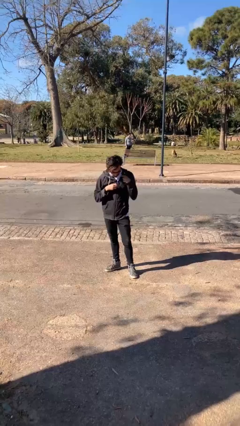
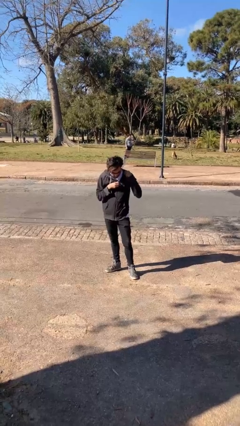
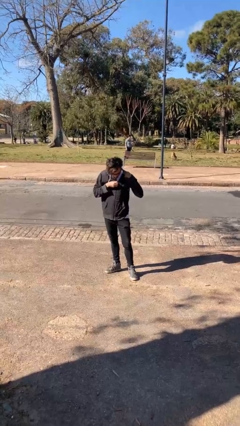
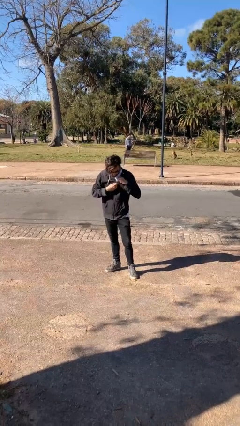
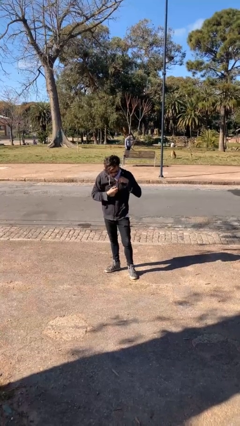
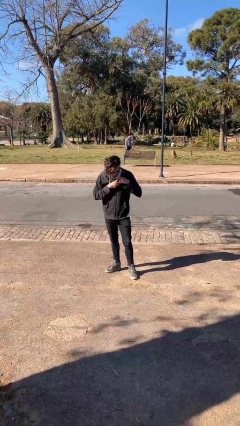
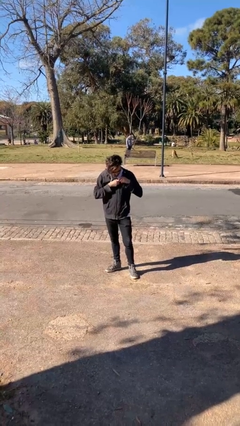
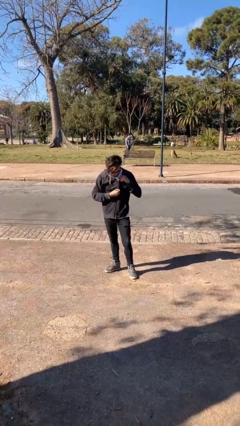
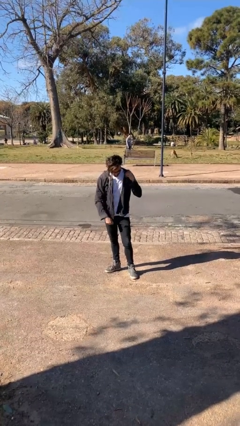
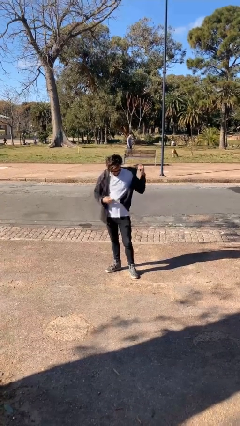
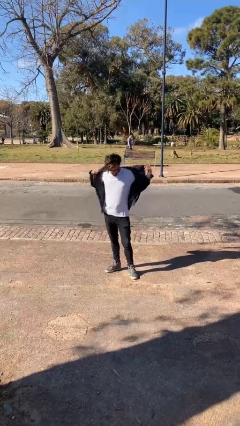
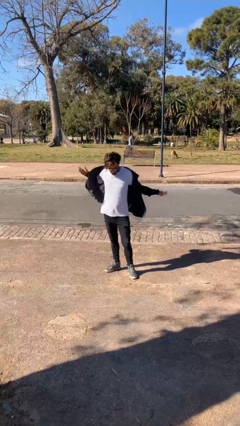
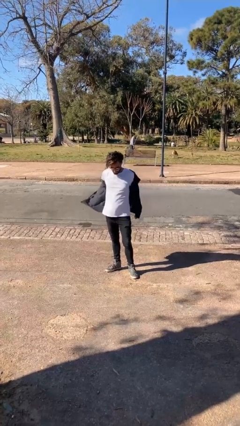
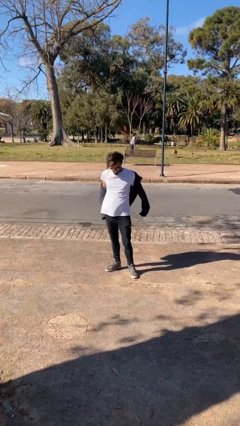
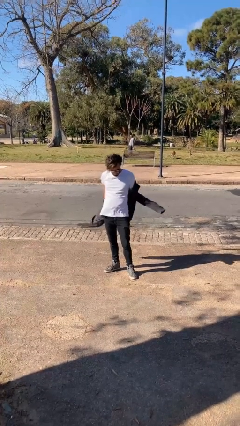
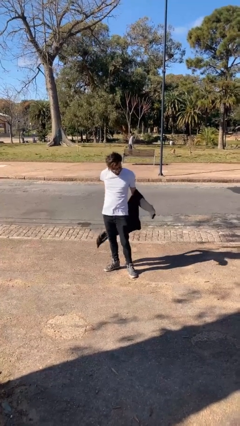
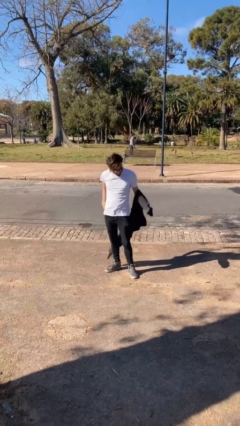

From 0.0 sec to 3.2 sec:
person unzips jacket

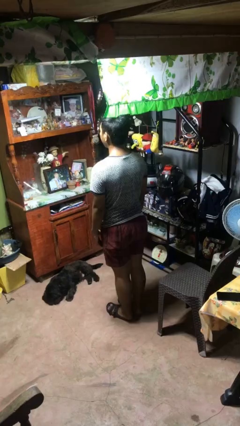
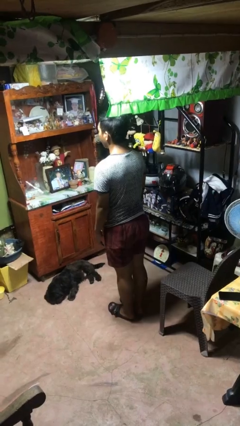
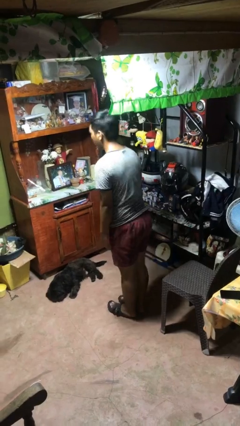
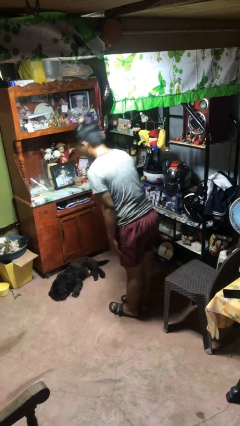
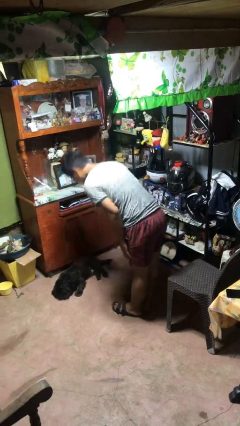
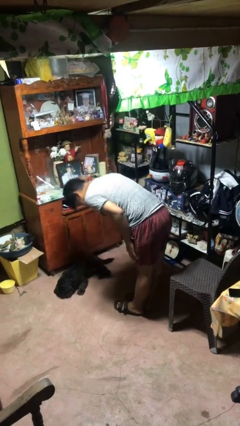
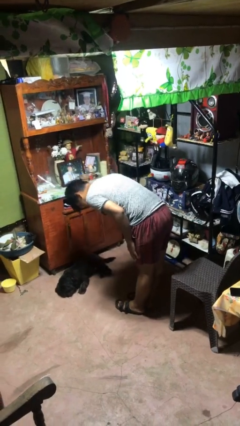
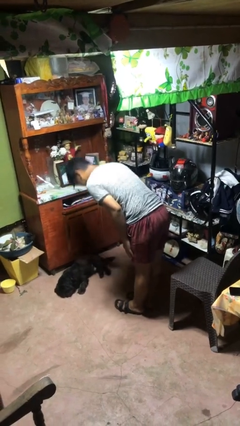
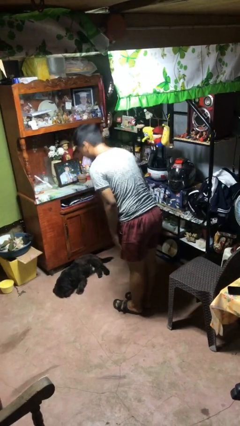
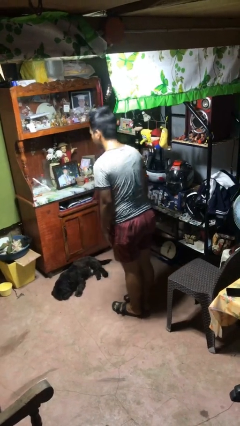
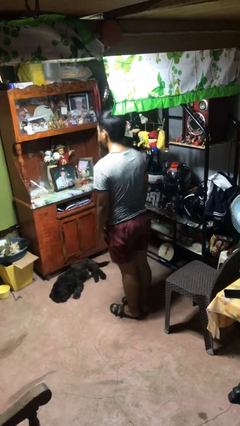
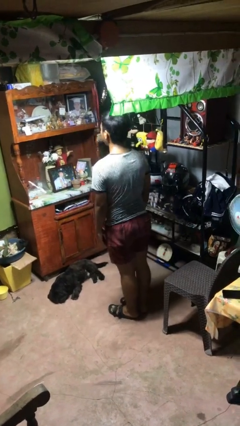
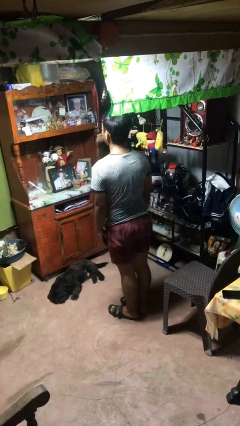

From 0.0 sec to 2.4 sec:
person bows

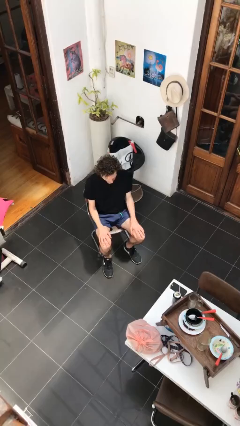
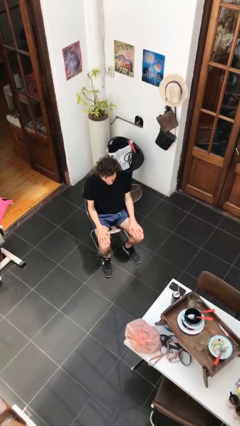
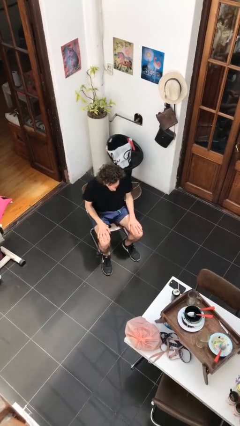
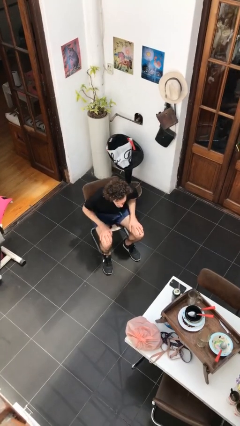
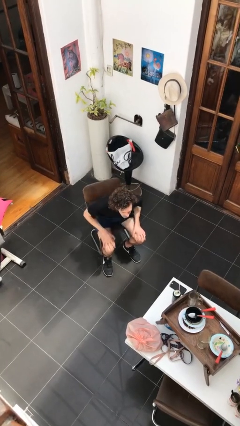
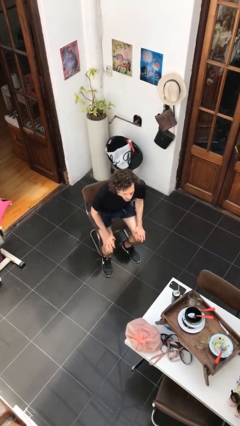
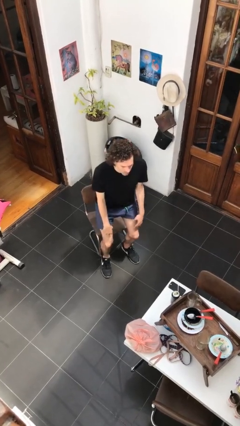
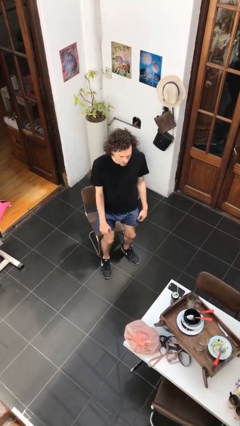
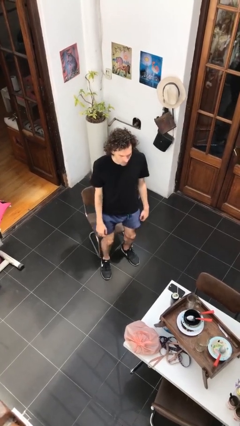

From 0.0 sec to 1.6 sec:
person stands up

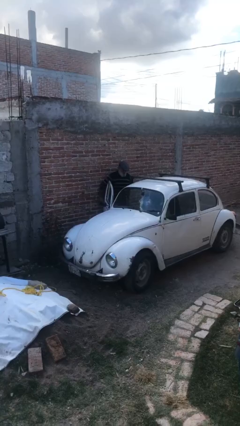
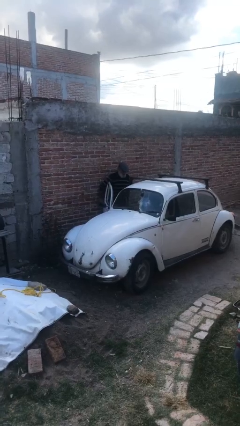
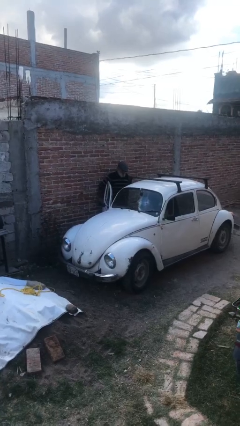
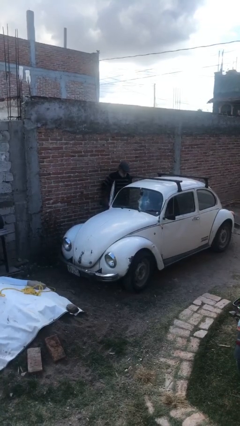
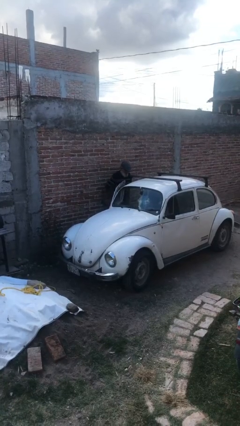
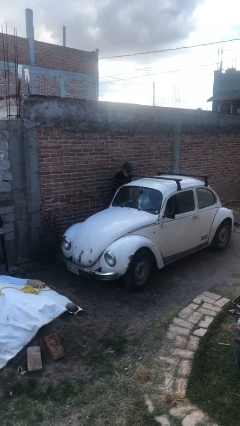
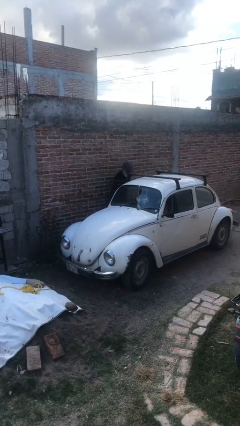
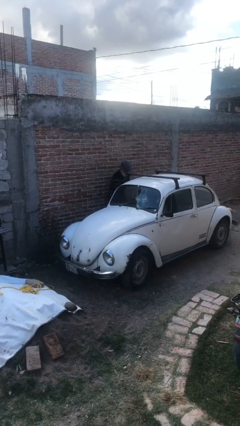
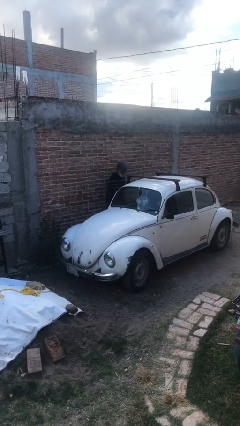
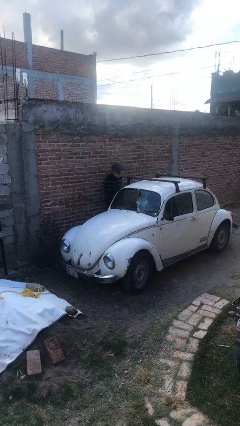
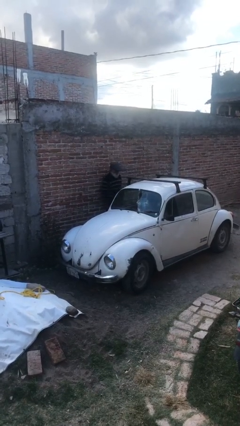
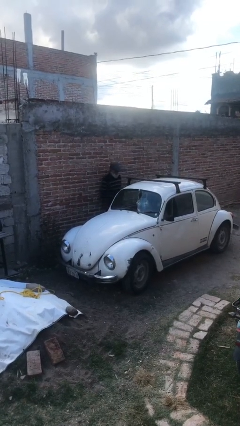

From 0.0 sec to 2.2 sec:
person closes car door

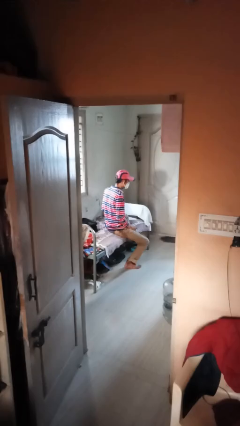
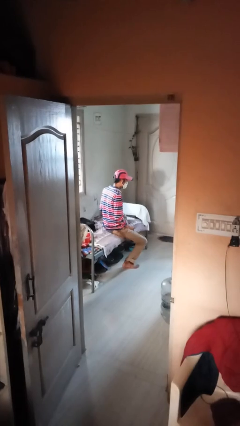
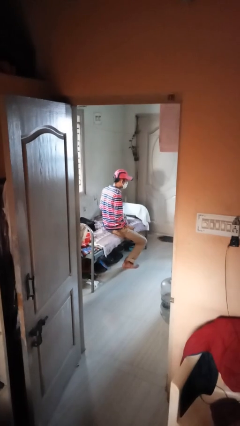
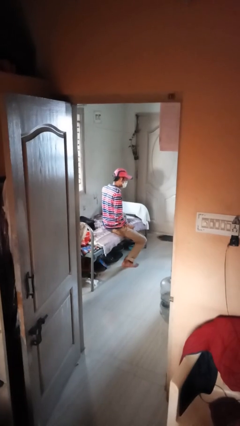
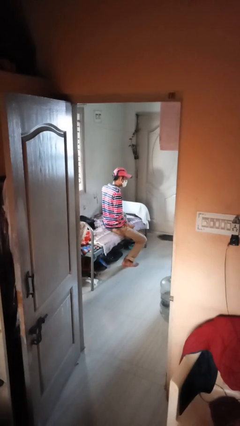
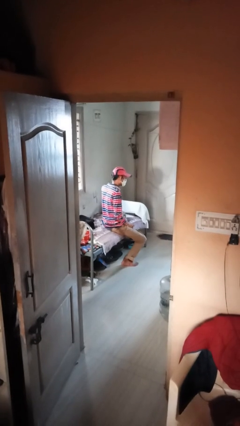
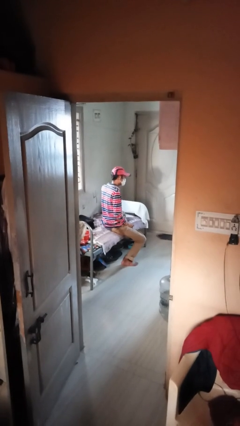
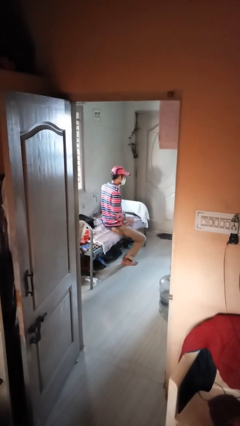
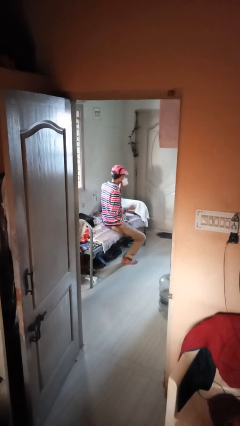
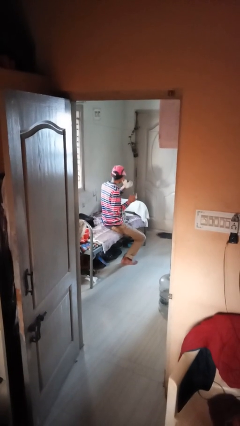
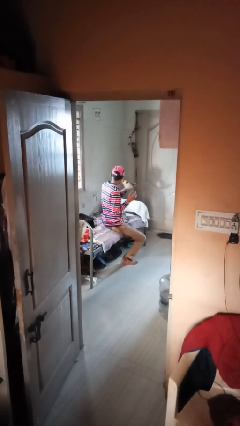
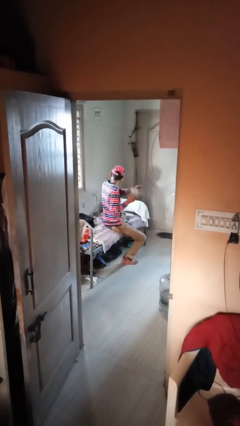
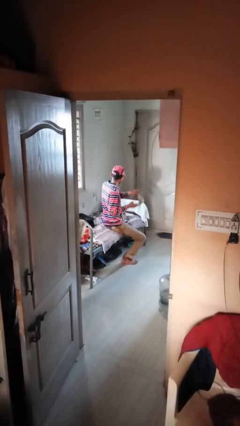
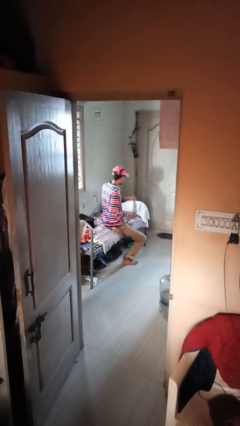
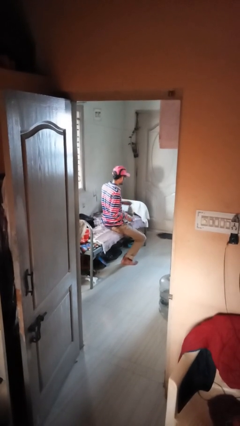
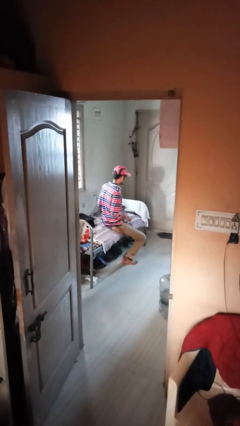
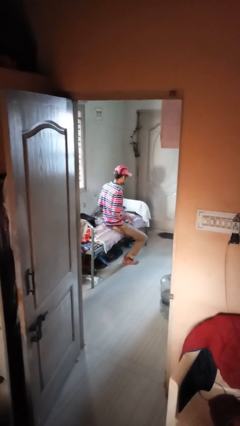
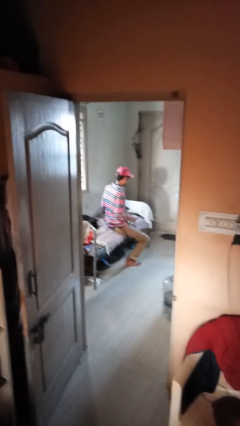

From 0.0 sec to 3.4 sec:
person takes off facemask

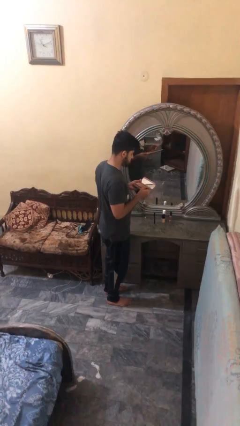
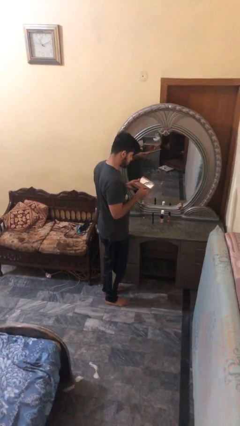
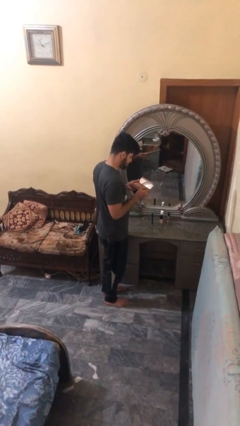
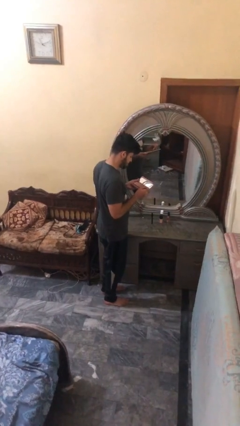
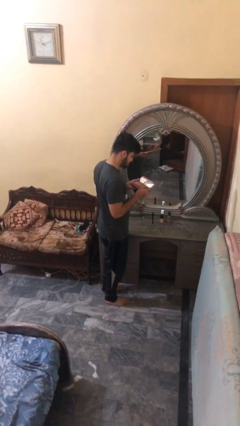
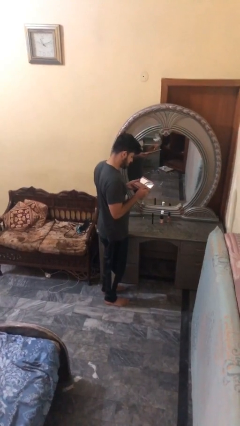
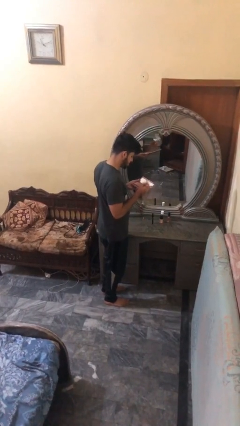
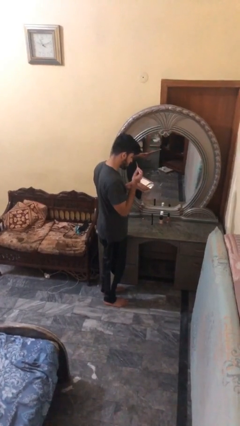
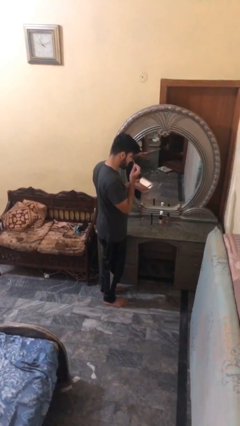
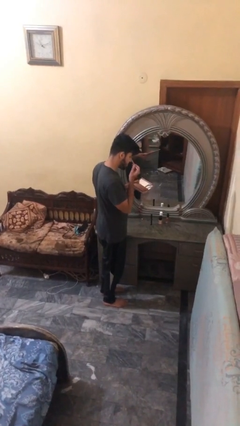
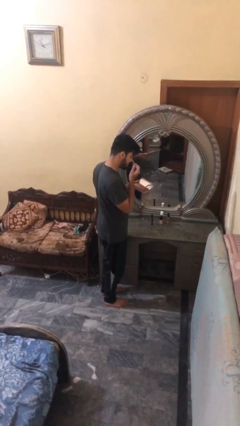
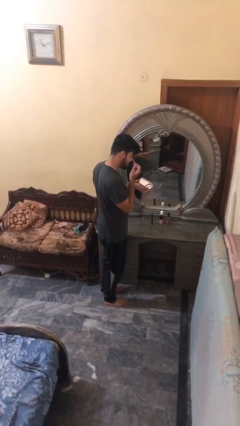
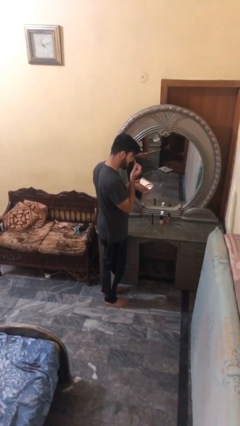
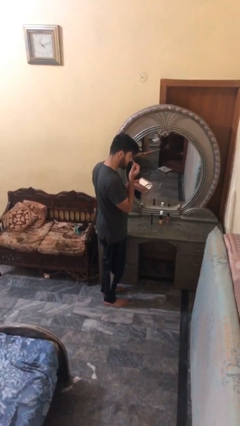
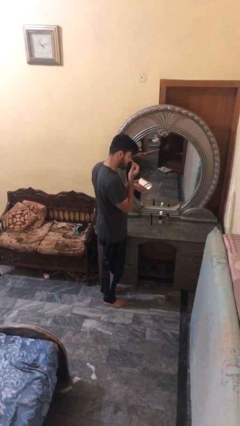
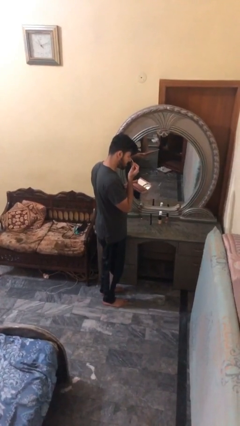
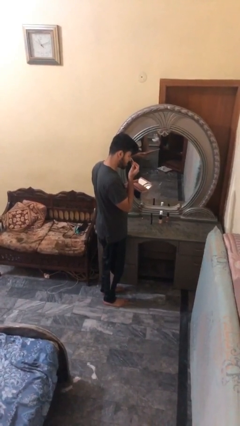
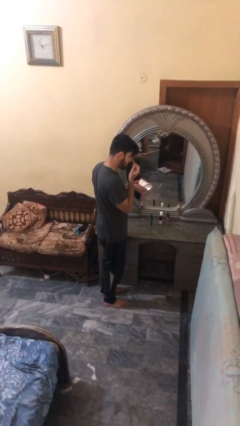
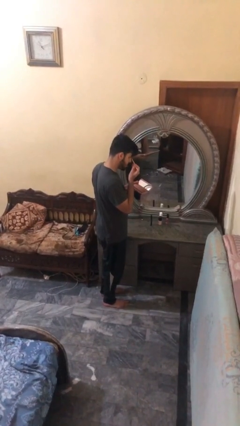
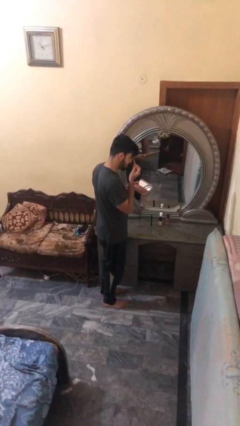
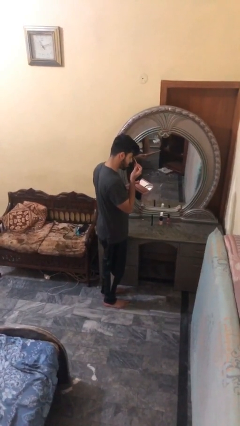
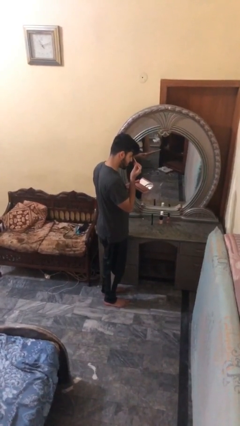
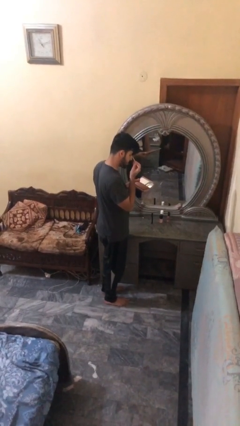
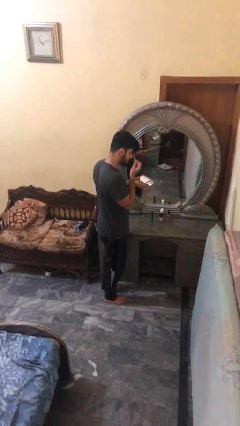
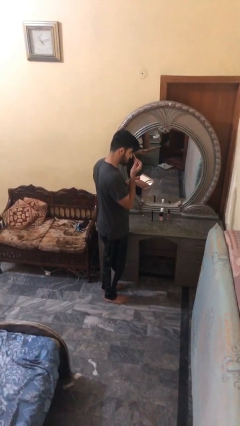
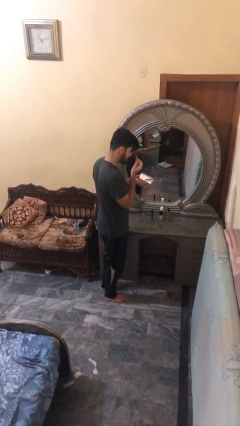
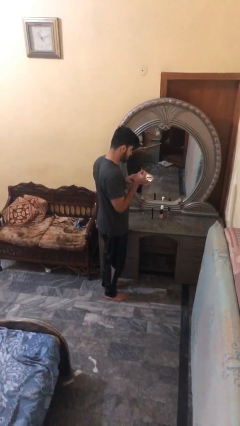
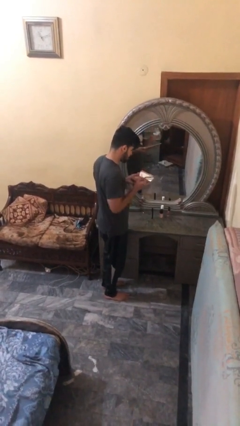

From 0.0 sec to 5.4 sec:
person applies eye makeup
